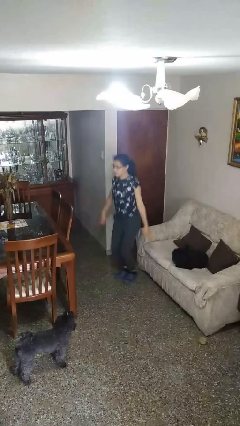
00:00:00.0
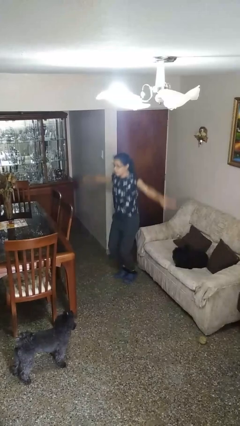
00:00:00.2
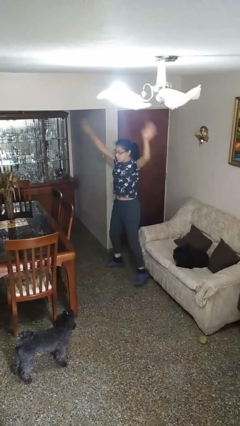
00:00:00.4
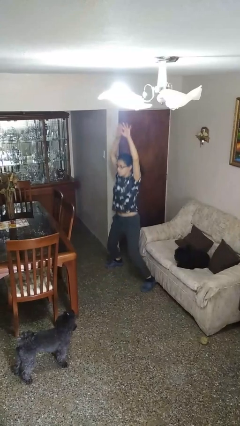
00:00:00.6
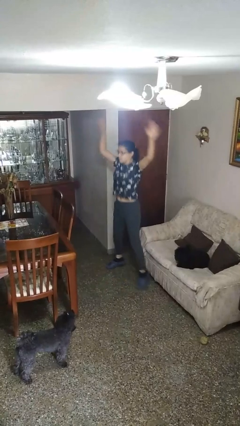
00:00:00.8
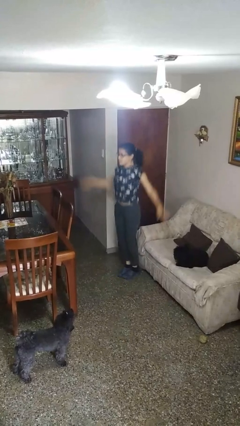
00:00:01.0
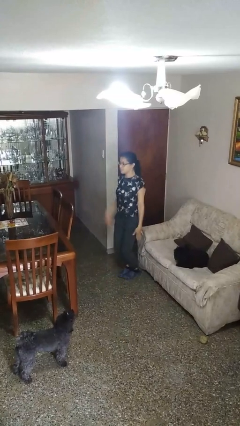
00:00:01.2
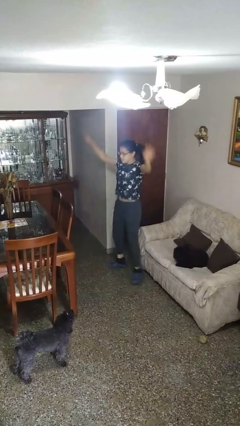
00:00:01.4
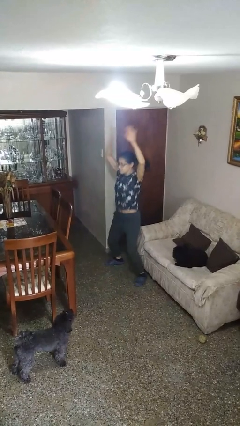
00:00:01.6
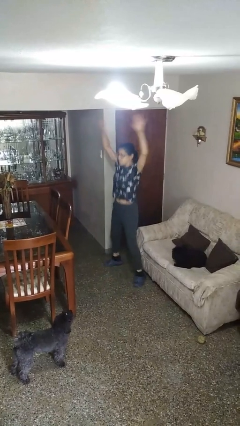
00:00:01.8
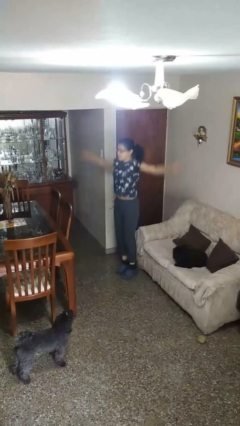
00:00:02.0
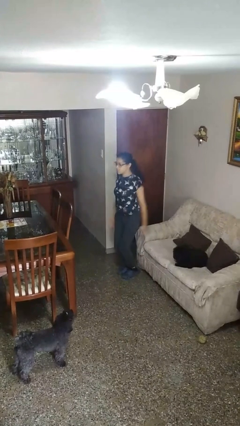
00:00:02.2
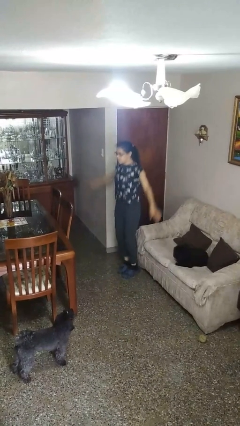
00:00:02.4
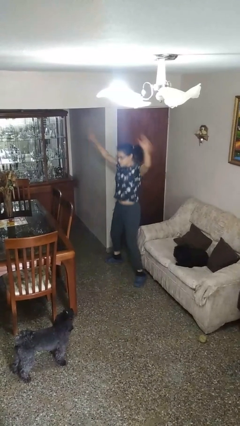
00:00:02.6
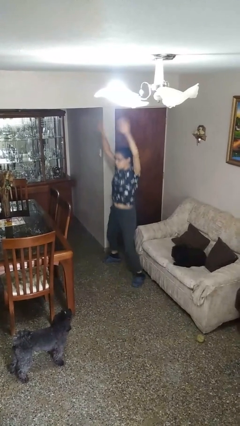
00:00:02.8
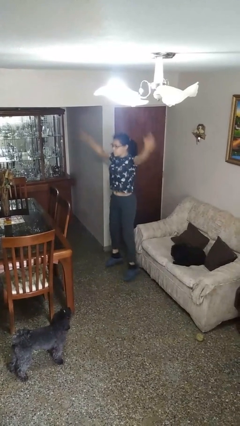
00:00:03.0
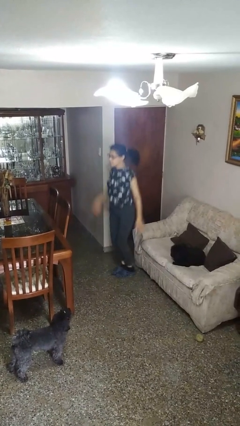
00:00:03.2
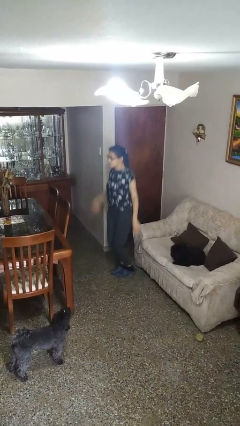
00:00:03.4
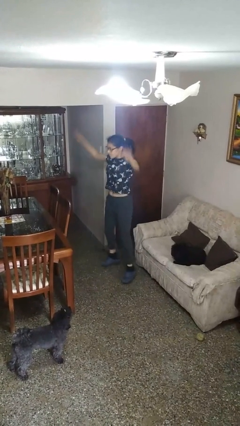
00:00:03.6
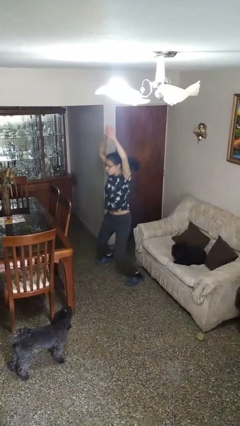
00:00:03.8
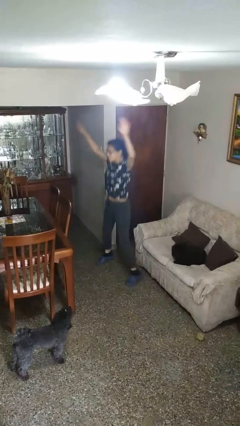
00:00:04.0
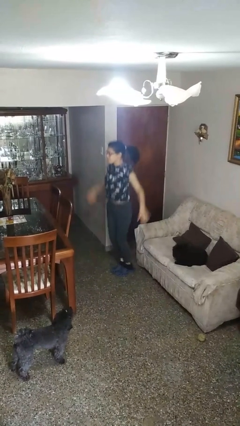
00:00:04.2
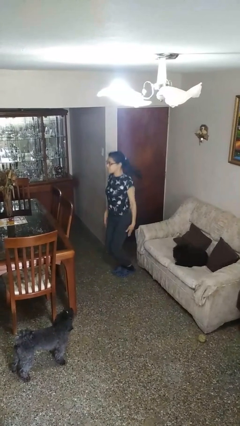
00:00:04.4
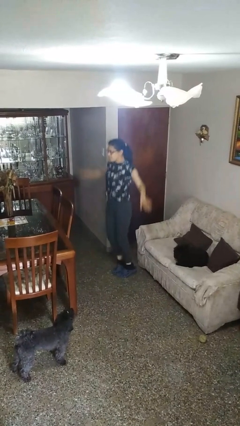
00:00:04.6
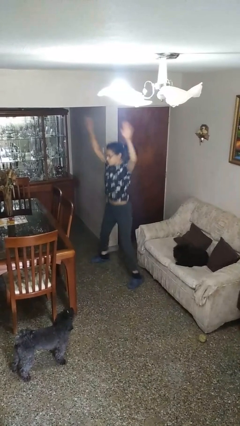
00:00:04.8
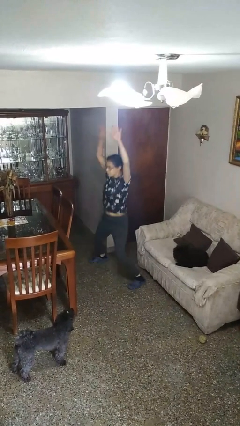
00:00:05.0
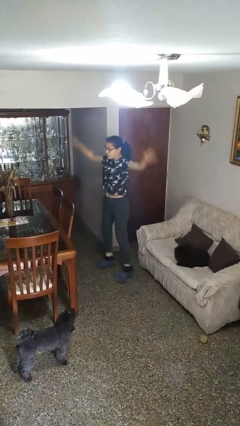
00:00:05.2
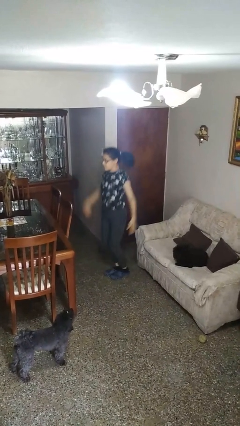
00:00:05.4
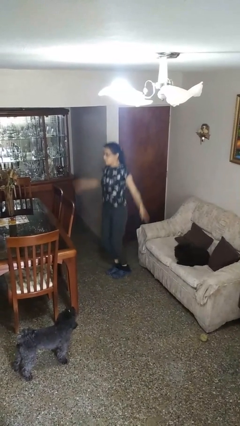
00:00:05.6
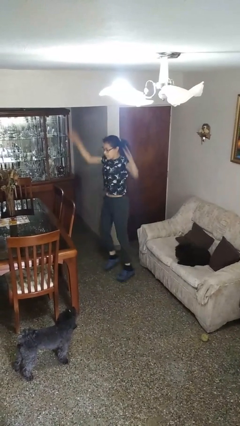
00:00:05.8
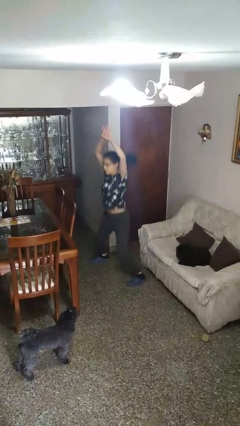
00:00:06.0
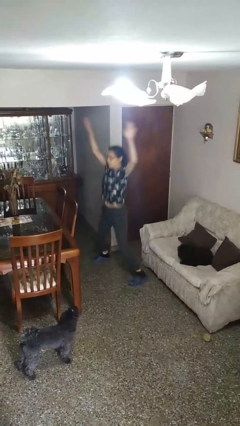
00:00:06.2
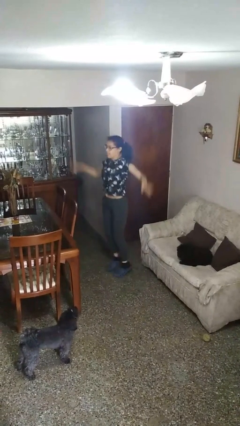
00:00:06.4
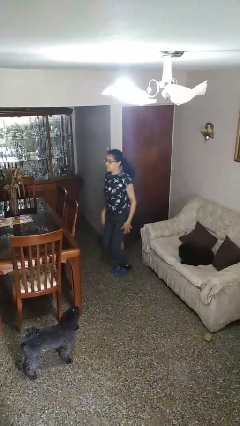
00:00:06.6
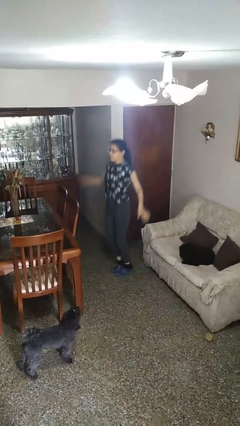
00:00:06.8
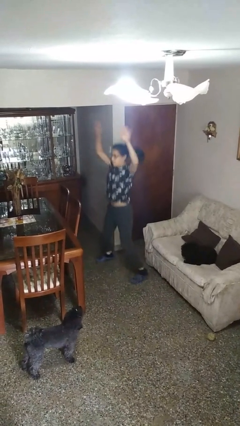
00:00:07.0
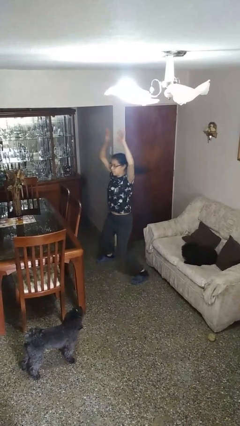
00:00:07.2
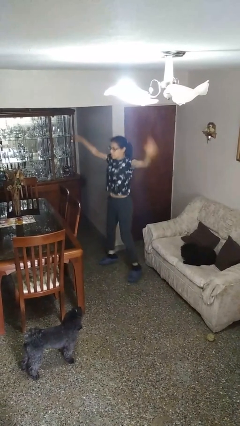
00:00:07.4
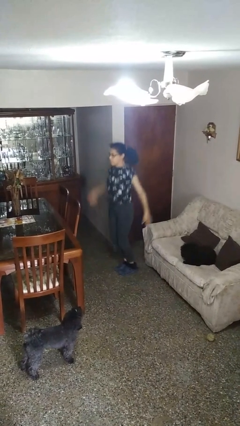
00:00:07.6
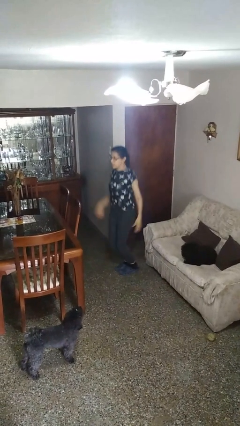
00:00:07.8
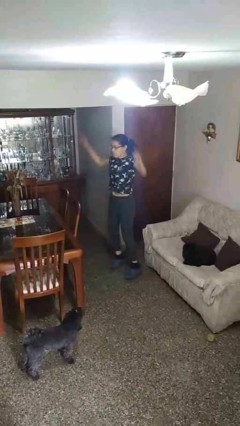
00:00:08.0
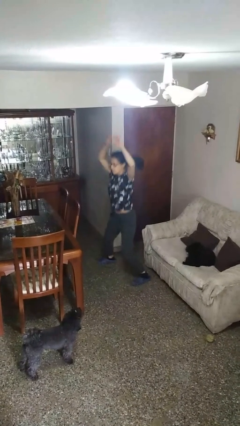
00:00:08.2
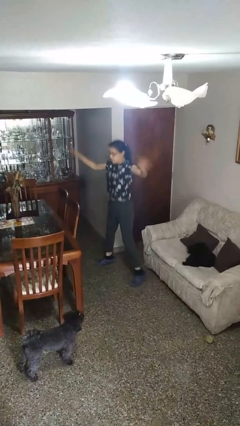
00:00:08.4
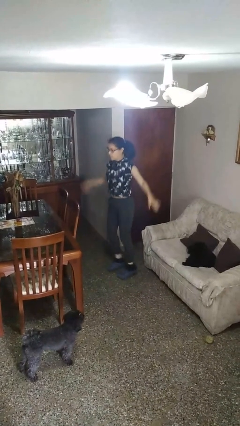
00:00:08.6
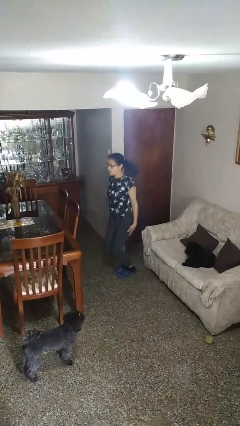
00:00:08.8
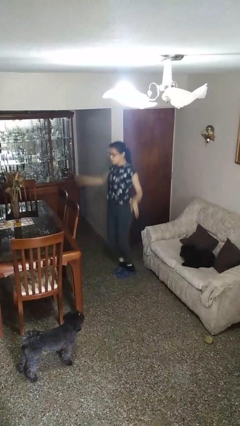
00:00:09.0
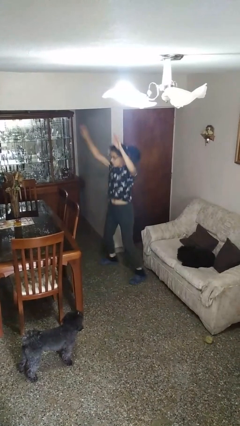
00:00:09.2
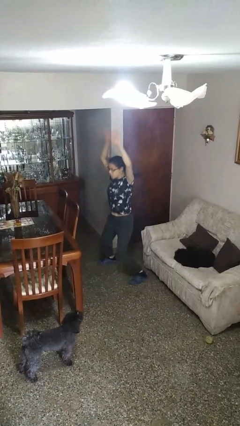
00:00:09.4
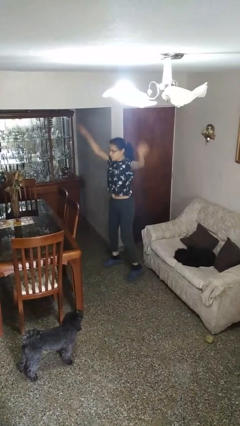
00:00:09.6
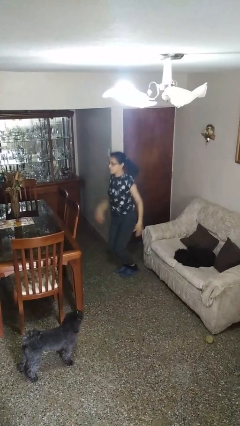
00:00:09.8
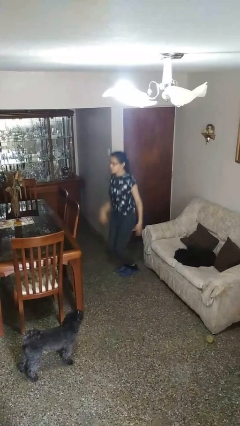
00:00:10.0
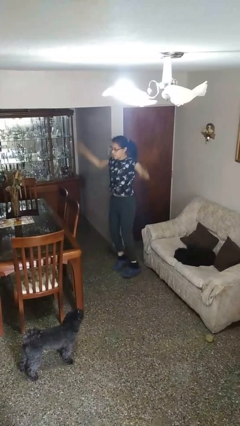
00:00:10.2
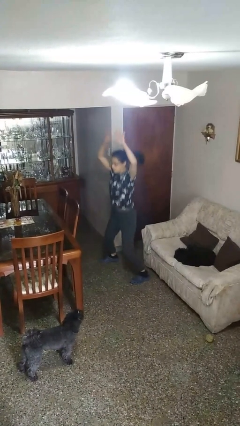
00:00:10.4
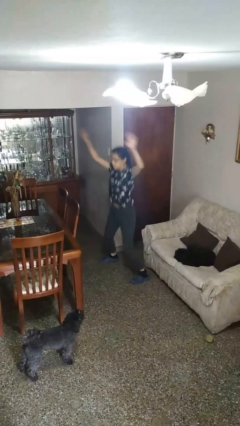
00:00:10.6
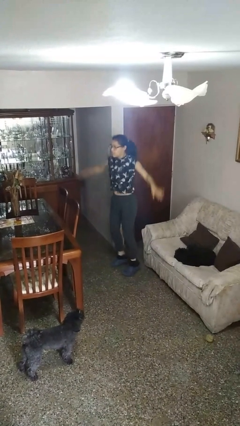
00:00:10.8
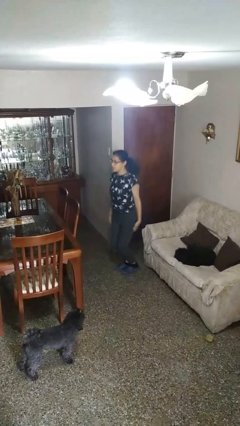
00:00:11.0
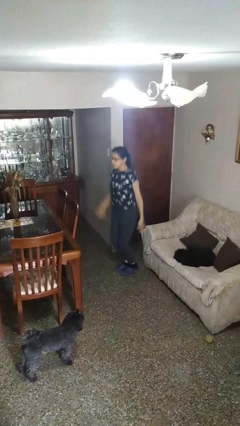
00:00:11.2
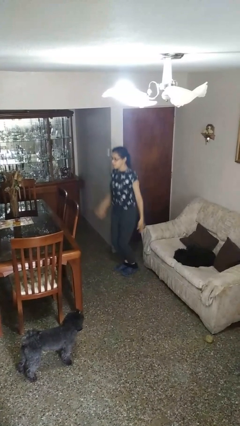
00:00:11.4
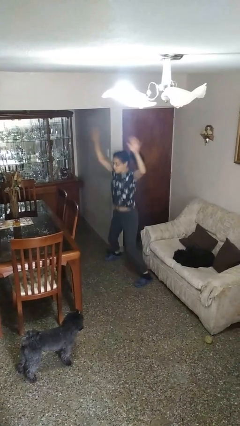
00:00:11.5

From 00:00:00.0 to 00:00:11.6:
person exercises with jumping jacks

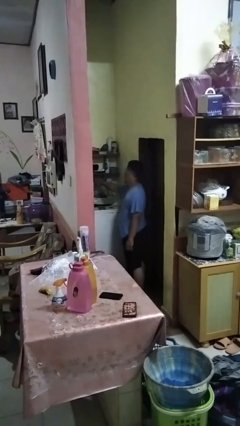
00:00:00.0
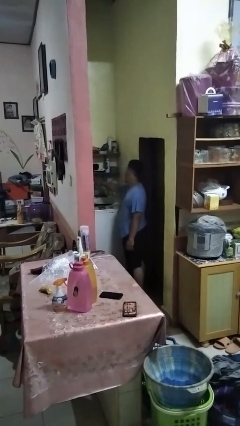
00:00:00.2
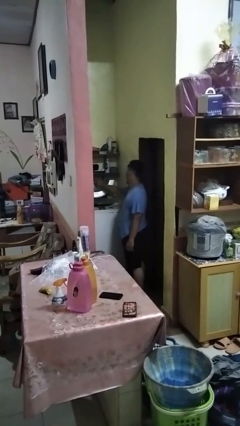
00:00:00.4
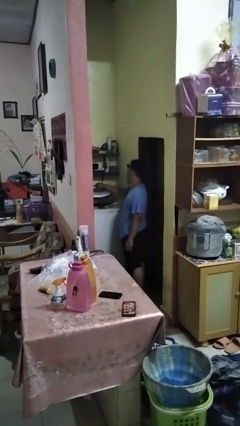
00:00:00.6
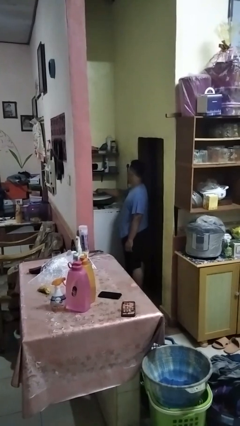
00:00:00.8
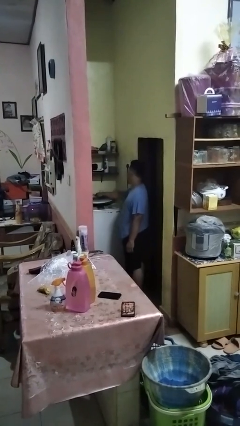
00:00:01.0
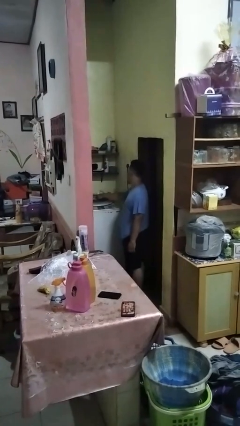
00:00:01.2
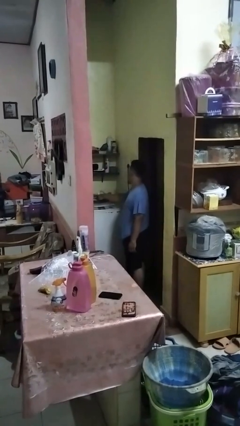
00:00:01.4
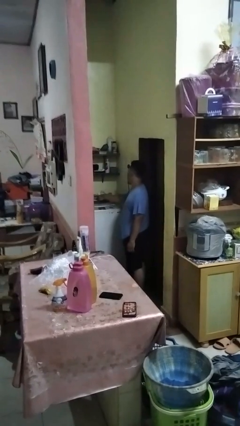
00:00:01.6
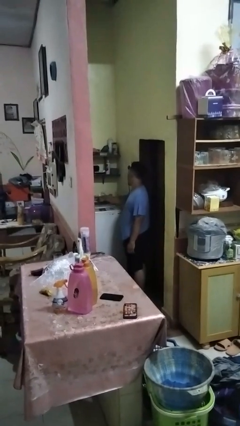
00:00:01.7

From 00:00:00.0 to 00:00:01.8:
person closes clothes washer

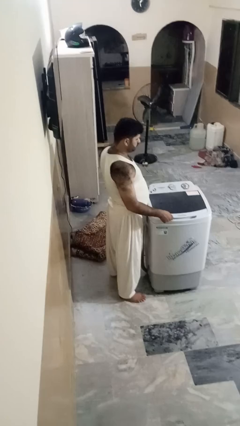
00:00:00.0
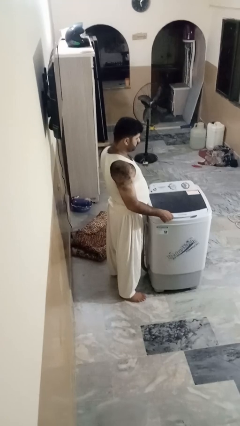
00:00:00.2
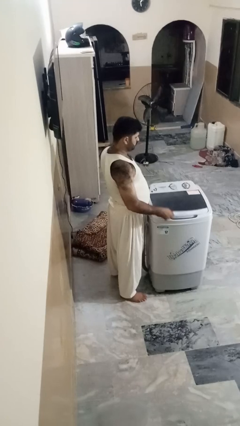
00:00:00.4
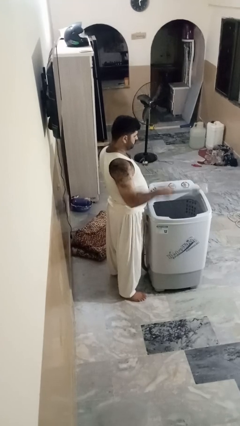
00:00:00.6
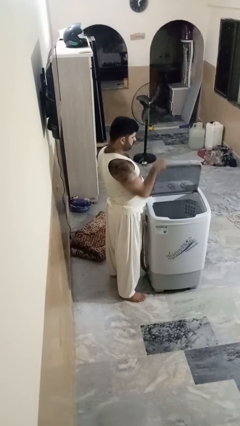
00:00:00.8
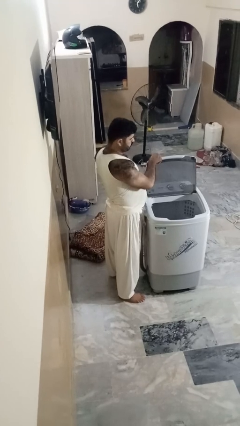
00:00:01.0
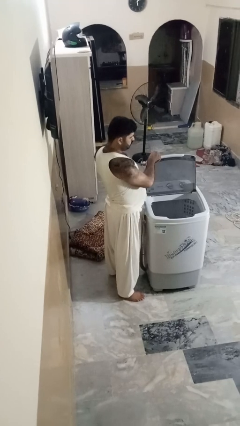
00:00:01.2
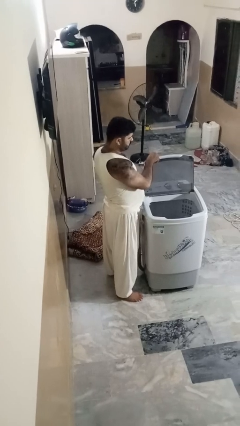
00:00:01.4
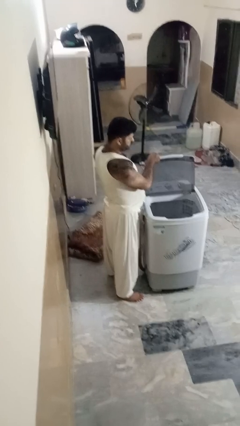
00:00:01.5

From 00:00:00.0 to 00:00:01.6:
person opens clothes washer

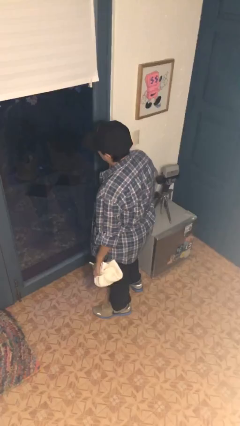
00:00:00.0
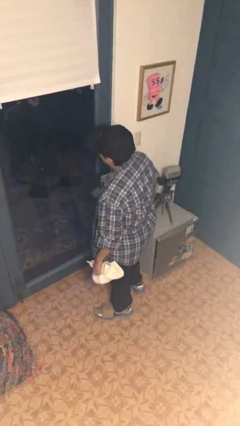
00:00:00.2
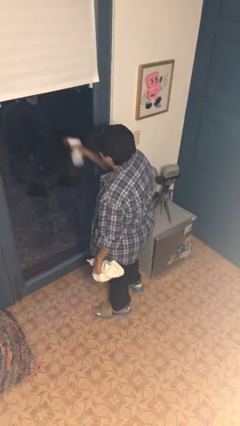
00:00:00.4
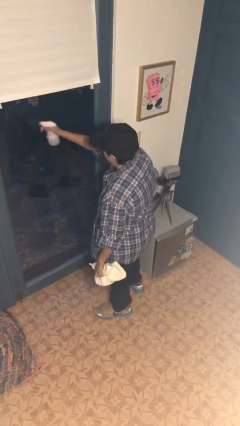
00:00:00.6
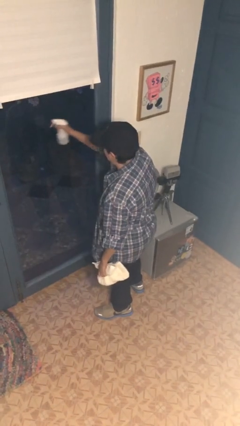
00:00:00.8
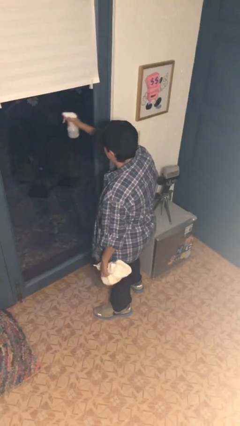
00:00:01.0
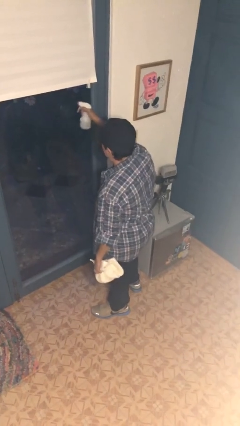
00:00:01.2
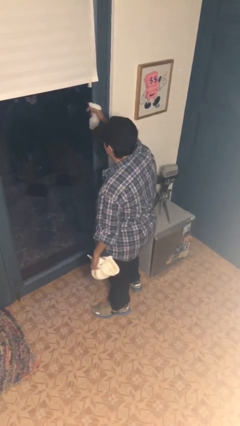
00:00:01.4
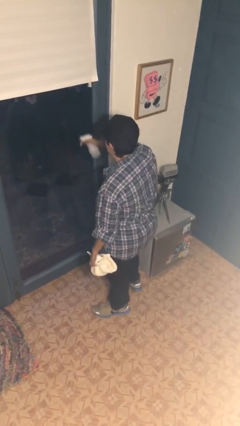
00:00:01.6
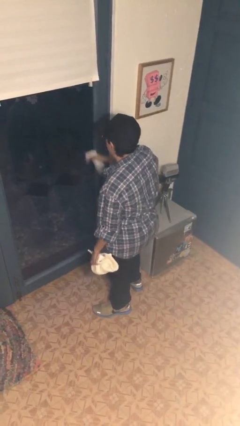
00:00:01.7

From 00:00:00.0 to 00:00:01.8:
person sprays from bottle

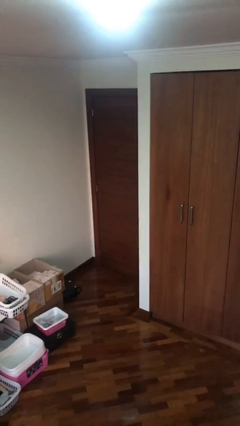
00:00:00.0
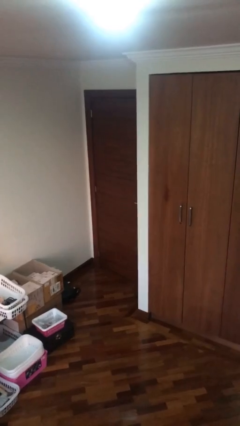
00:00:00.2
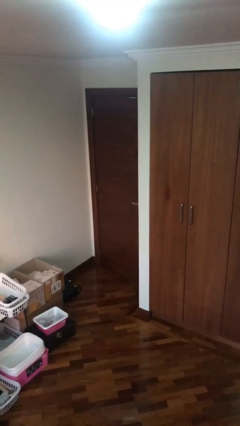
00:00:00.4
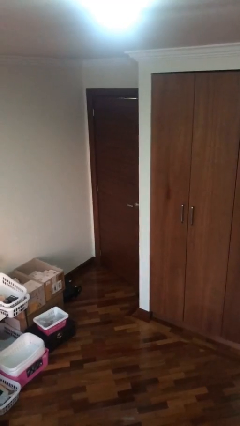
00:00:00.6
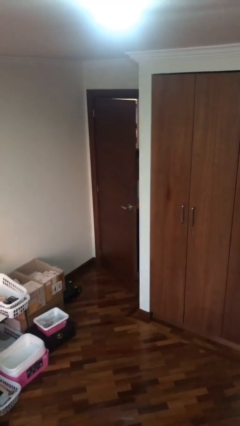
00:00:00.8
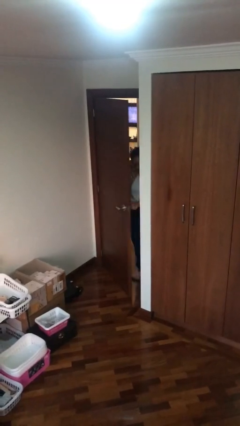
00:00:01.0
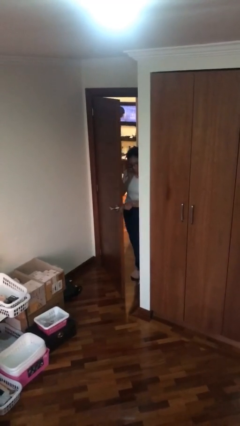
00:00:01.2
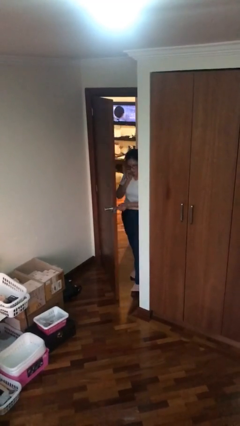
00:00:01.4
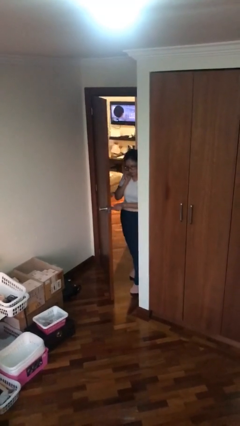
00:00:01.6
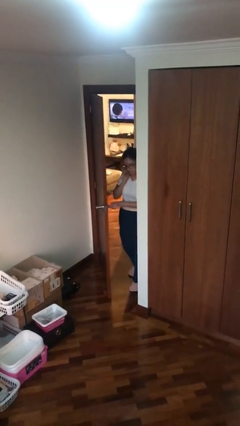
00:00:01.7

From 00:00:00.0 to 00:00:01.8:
person opens facility door
